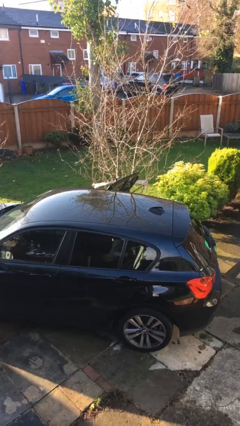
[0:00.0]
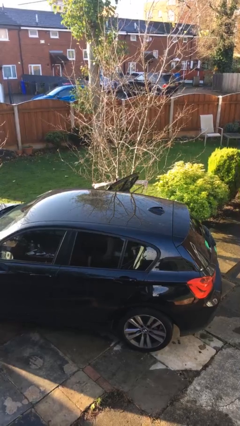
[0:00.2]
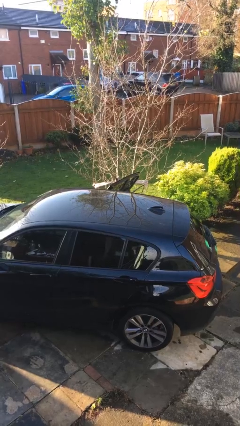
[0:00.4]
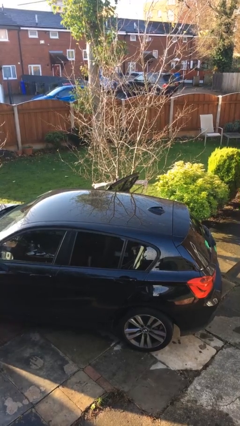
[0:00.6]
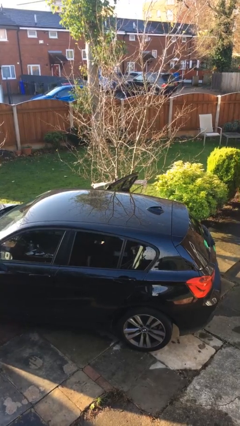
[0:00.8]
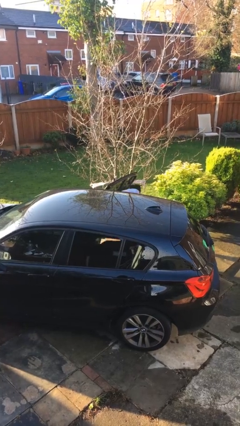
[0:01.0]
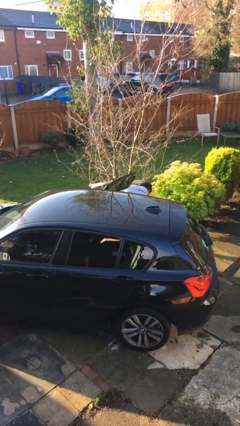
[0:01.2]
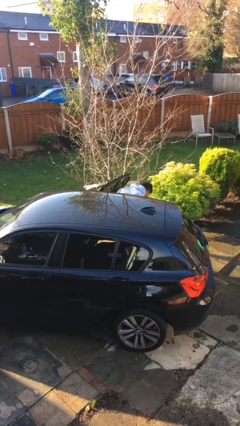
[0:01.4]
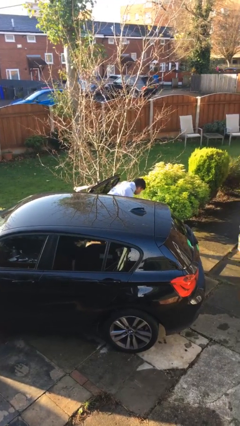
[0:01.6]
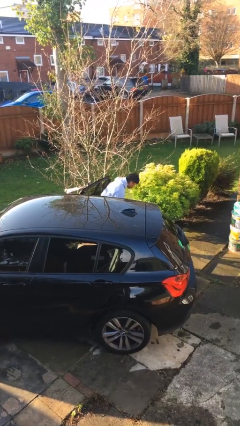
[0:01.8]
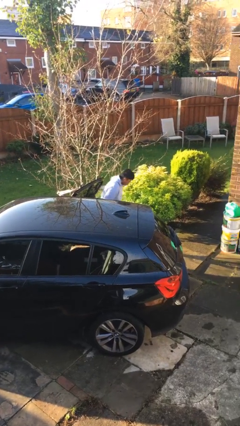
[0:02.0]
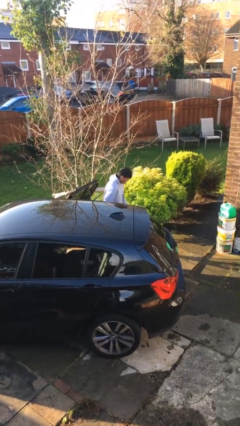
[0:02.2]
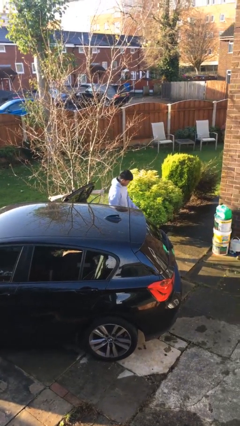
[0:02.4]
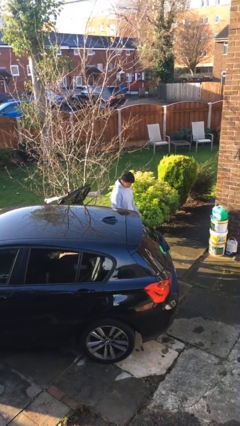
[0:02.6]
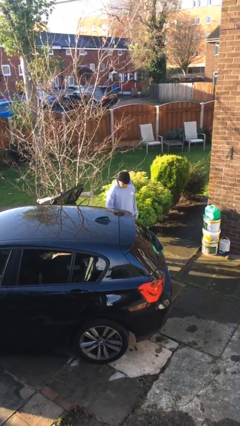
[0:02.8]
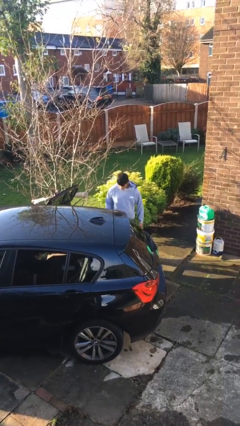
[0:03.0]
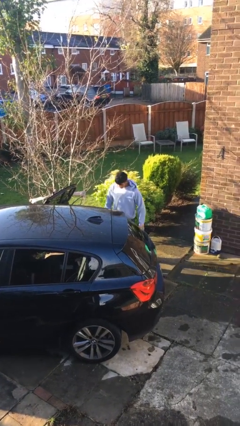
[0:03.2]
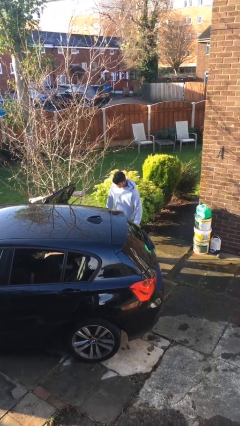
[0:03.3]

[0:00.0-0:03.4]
person exits car

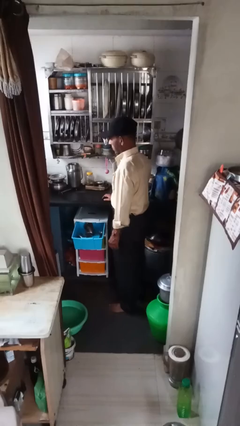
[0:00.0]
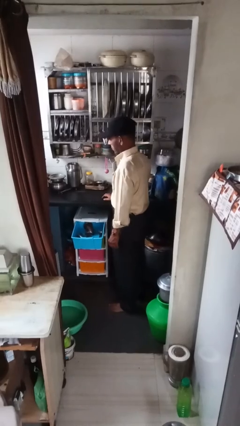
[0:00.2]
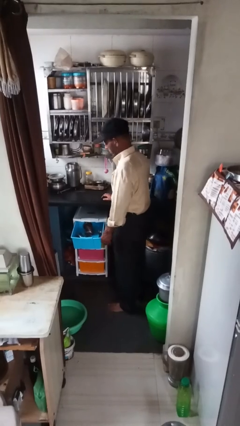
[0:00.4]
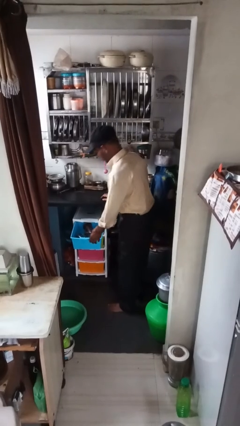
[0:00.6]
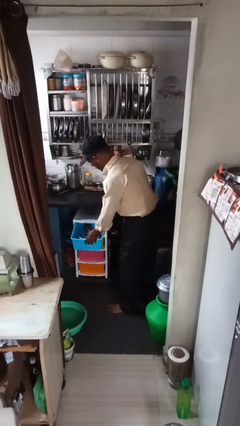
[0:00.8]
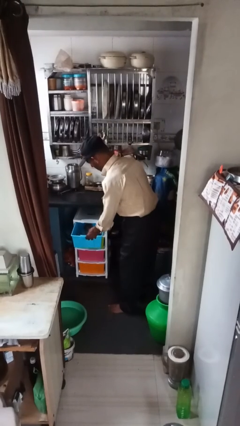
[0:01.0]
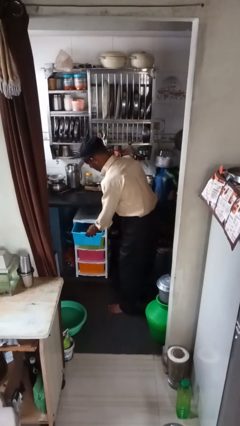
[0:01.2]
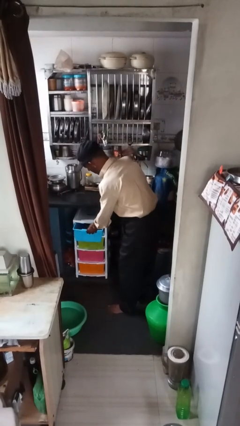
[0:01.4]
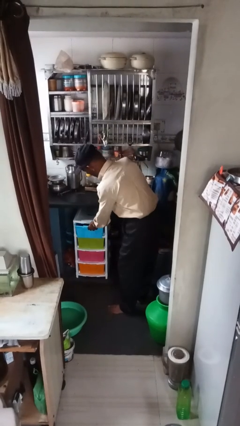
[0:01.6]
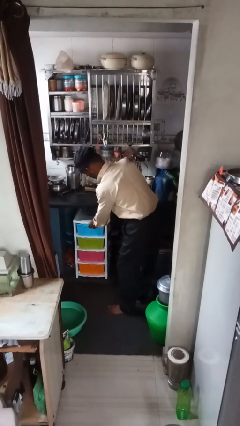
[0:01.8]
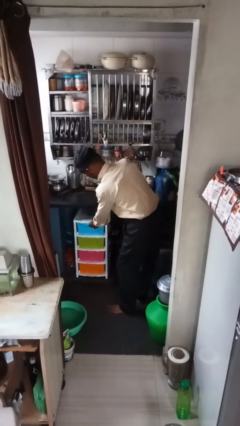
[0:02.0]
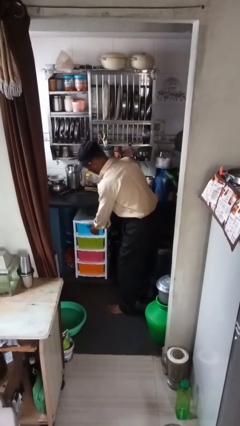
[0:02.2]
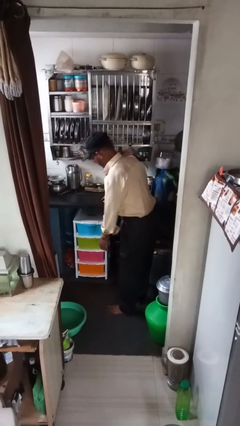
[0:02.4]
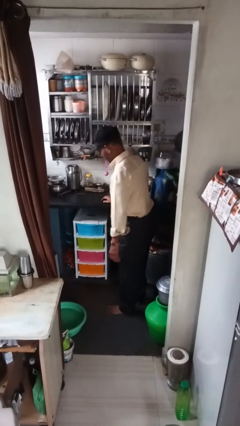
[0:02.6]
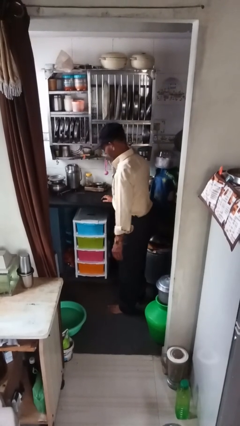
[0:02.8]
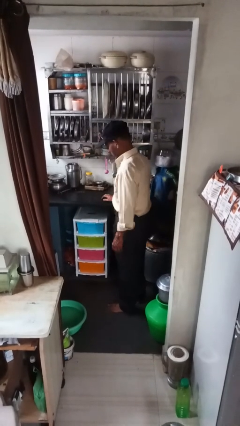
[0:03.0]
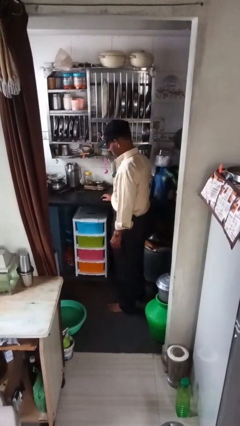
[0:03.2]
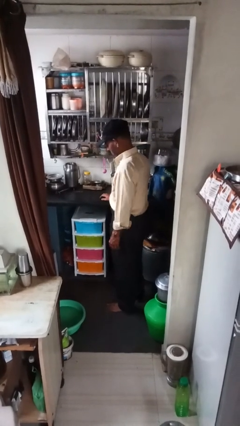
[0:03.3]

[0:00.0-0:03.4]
person closes kitchen drawer

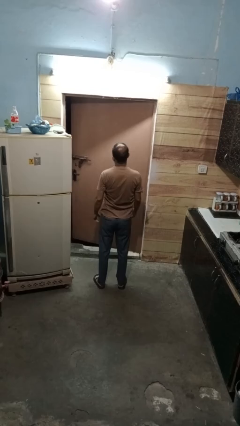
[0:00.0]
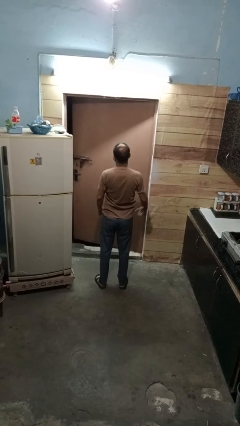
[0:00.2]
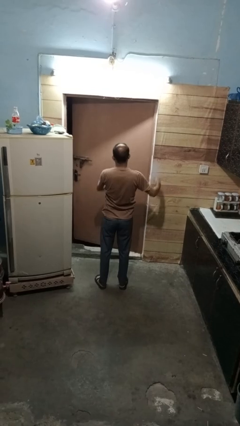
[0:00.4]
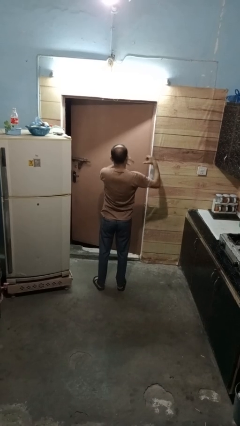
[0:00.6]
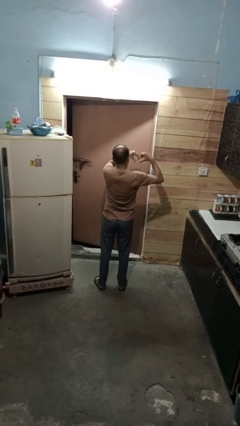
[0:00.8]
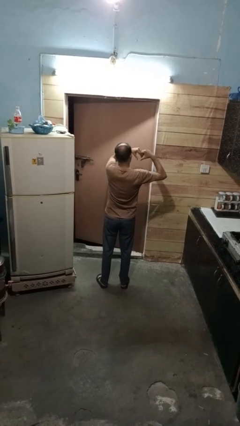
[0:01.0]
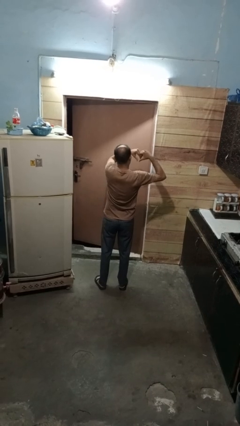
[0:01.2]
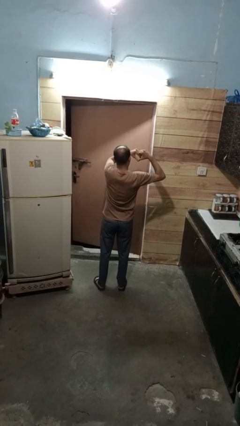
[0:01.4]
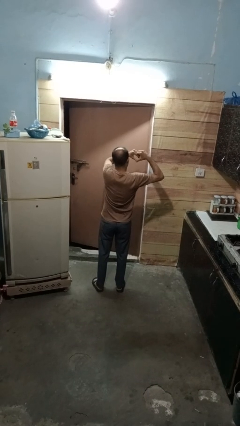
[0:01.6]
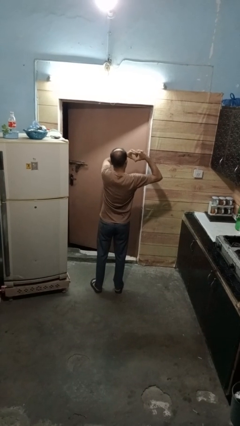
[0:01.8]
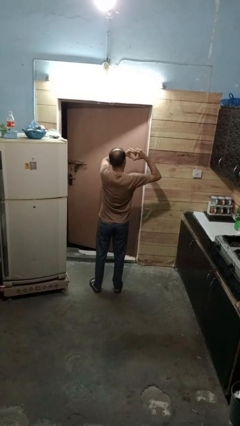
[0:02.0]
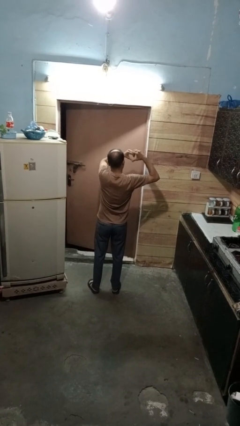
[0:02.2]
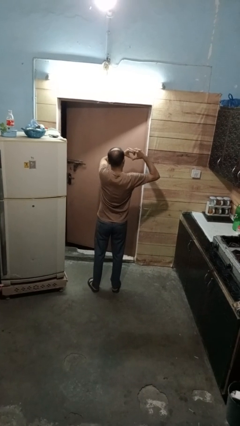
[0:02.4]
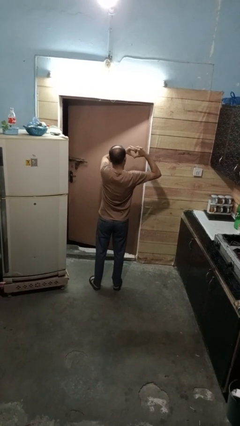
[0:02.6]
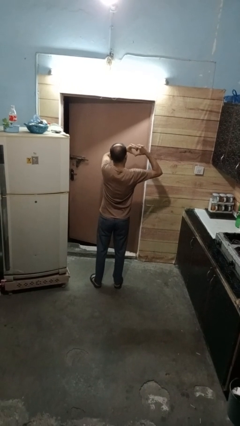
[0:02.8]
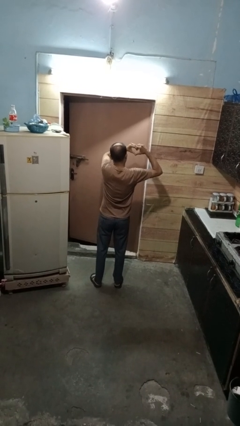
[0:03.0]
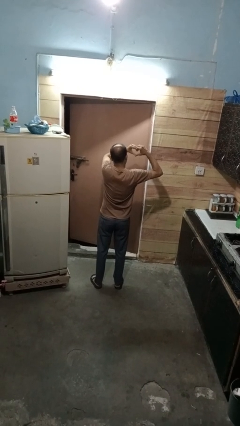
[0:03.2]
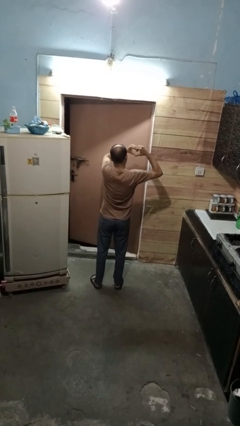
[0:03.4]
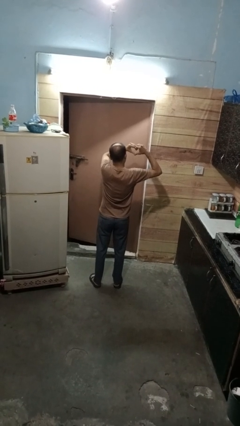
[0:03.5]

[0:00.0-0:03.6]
person gestures heart

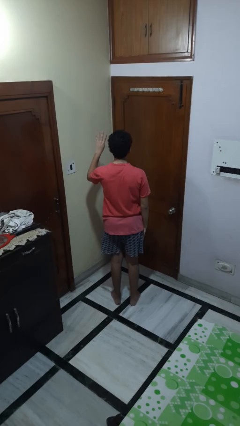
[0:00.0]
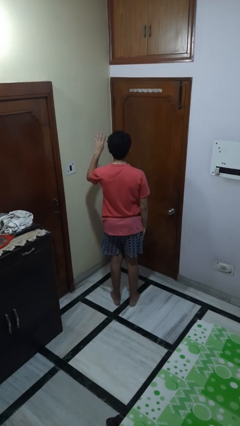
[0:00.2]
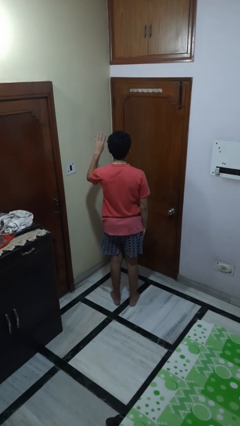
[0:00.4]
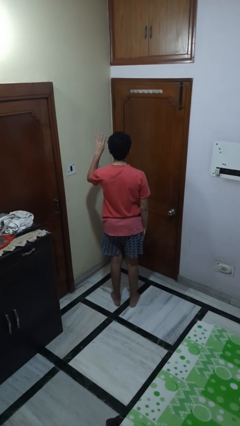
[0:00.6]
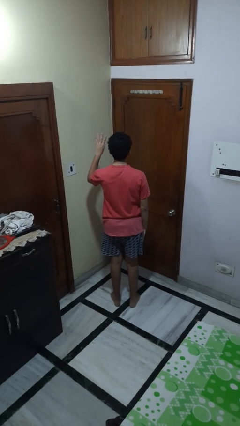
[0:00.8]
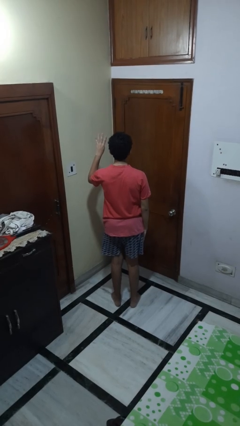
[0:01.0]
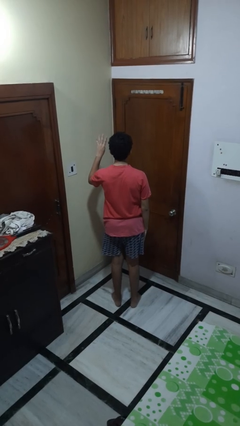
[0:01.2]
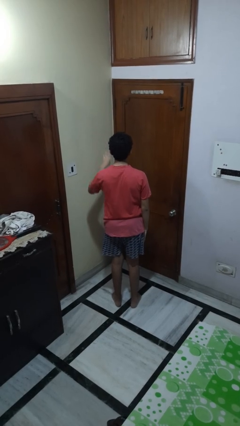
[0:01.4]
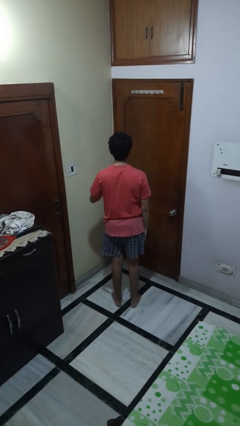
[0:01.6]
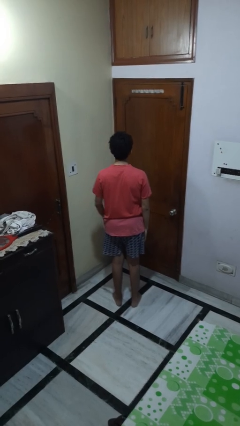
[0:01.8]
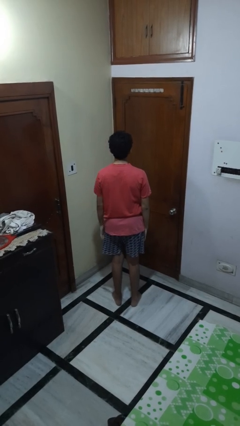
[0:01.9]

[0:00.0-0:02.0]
person gestures number four

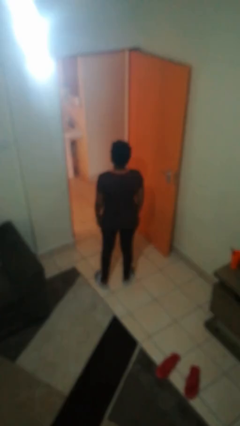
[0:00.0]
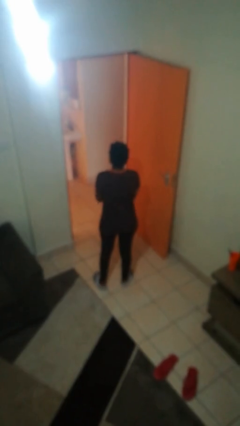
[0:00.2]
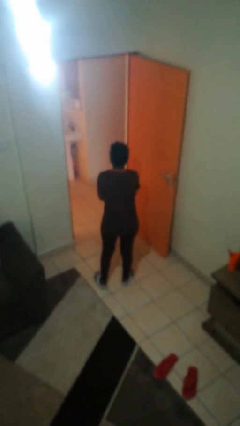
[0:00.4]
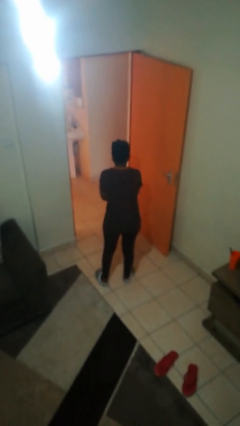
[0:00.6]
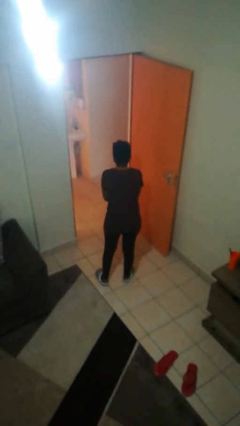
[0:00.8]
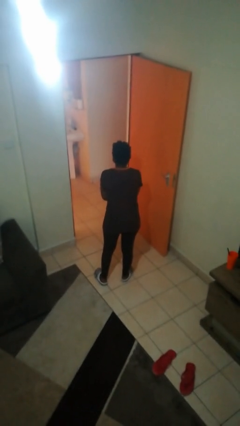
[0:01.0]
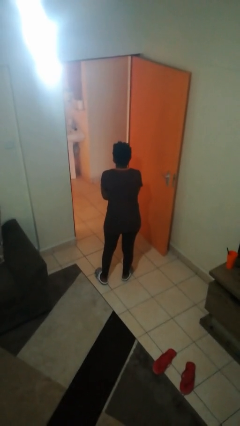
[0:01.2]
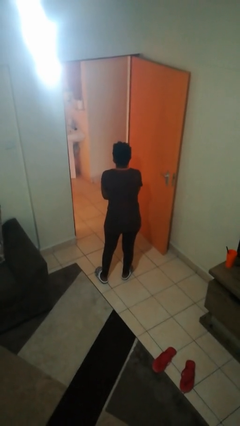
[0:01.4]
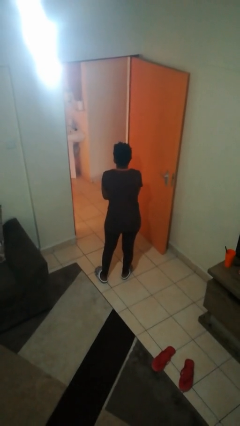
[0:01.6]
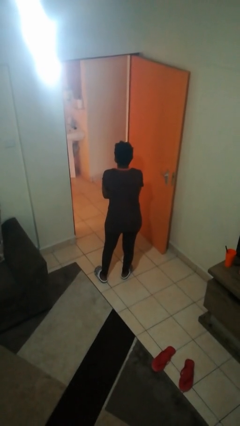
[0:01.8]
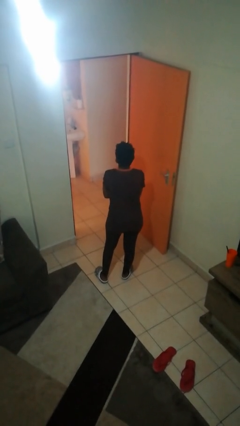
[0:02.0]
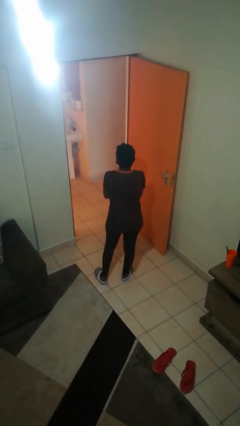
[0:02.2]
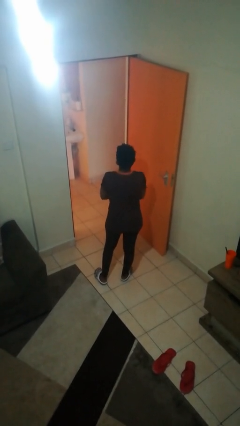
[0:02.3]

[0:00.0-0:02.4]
person claps hands

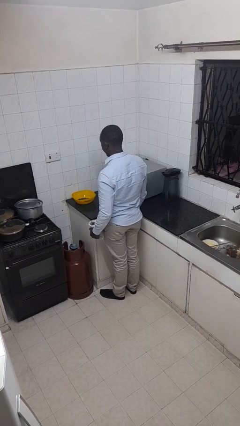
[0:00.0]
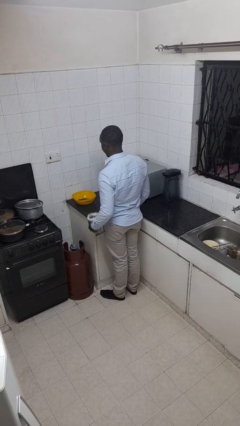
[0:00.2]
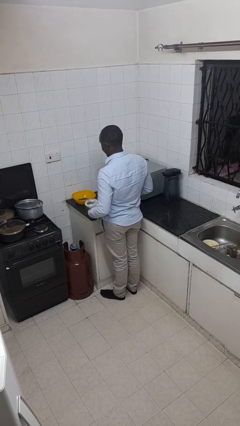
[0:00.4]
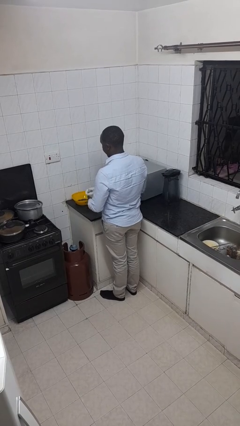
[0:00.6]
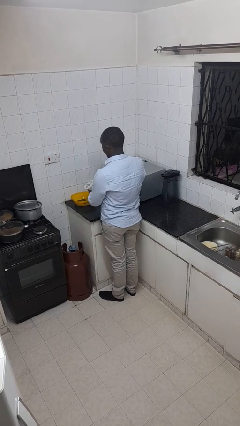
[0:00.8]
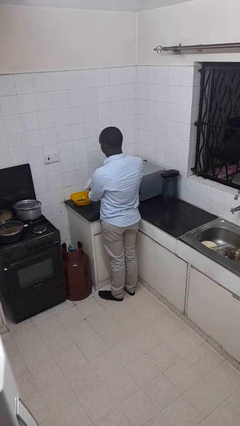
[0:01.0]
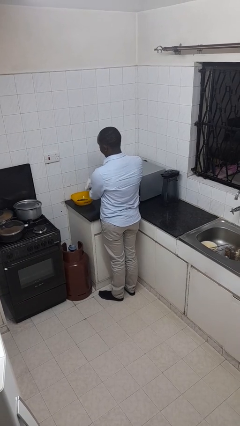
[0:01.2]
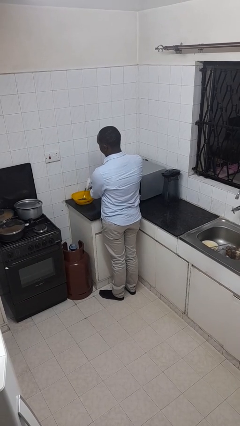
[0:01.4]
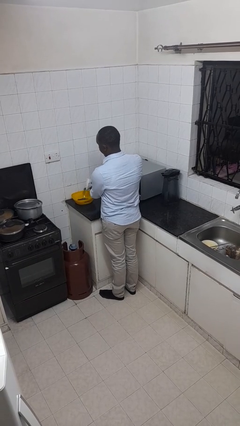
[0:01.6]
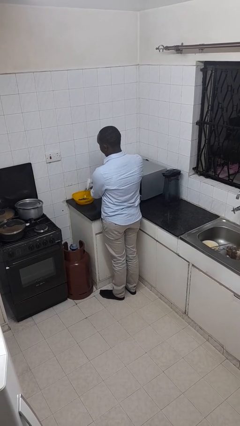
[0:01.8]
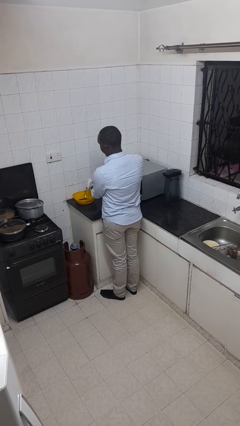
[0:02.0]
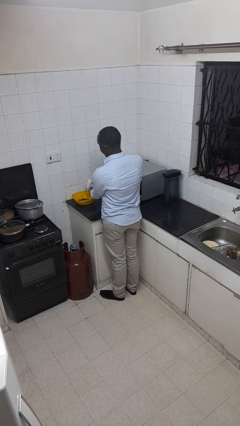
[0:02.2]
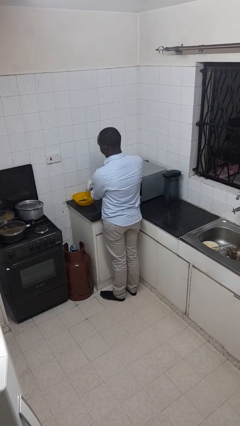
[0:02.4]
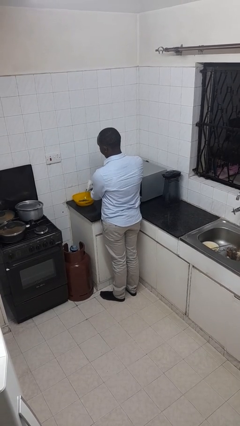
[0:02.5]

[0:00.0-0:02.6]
person pours into bowl

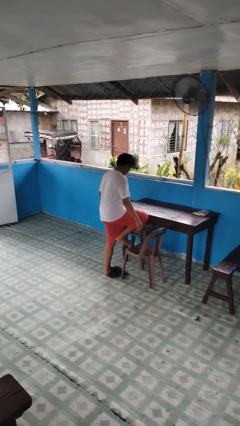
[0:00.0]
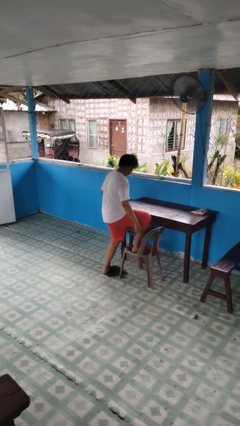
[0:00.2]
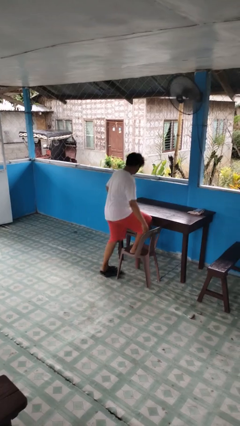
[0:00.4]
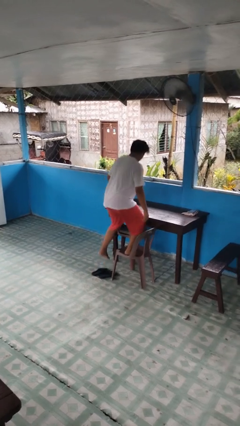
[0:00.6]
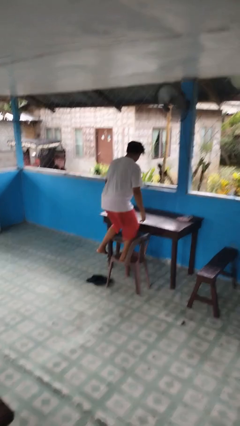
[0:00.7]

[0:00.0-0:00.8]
person climbs on chair
